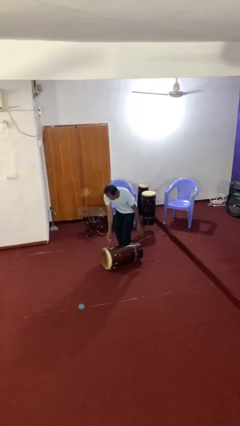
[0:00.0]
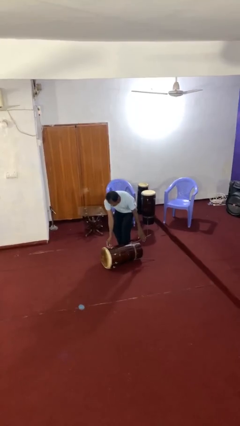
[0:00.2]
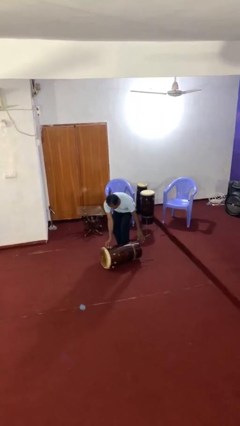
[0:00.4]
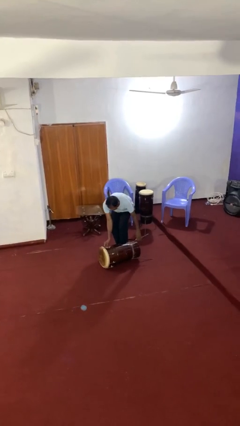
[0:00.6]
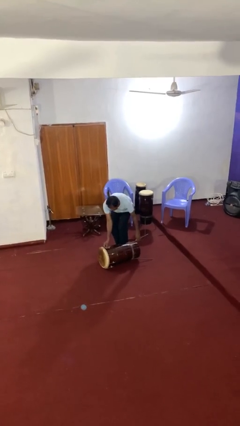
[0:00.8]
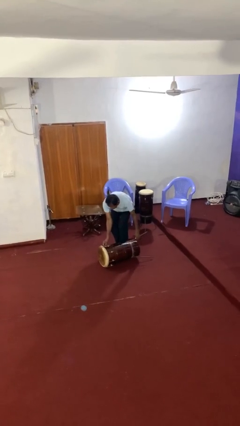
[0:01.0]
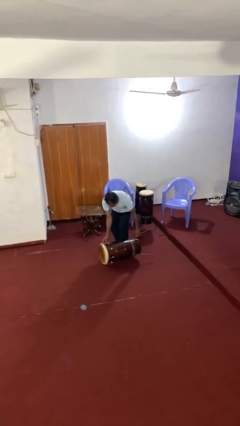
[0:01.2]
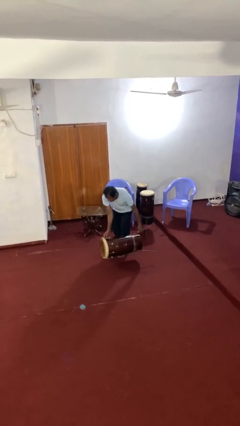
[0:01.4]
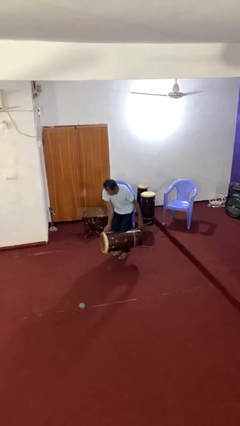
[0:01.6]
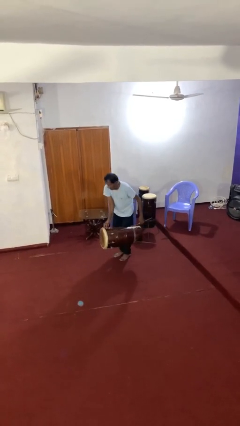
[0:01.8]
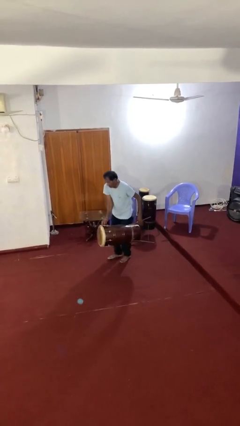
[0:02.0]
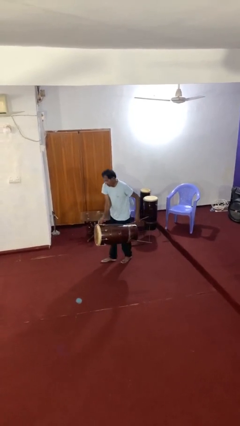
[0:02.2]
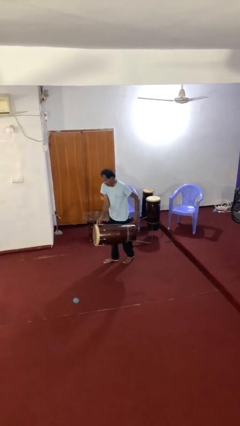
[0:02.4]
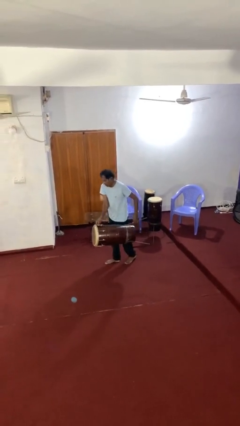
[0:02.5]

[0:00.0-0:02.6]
person picks up object from floor

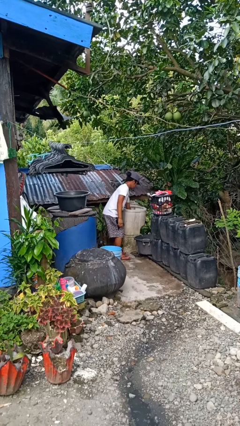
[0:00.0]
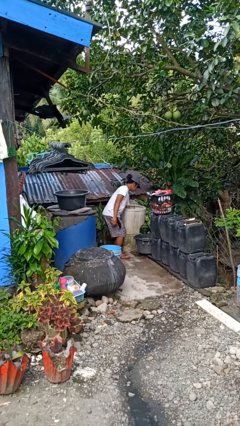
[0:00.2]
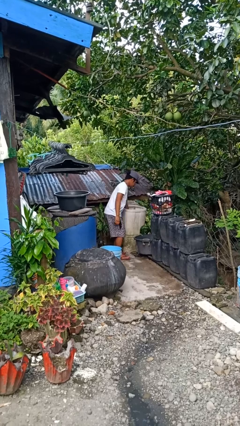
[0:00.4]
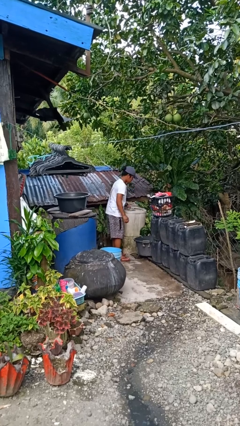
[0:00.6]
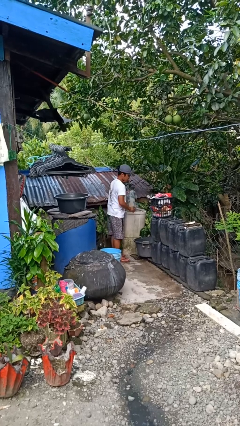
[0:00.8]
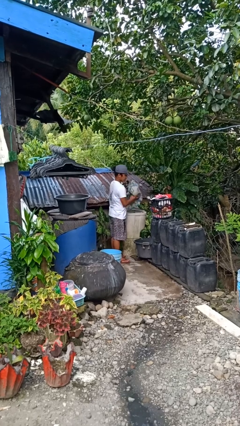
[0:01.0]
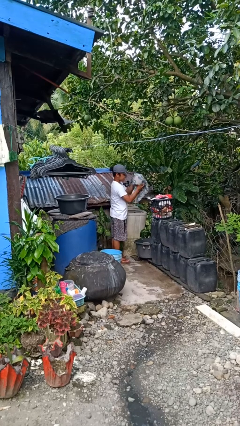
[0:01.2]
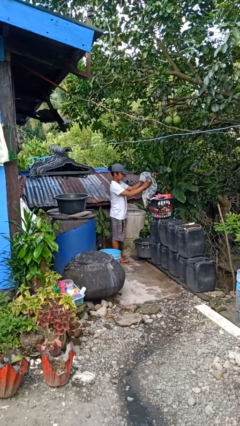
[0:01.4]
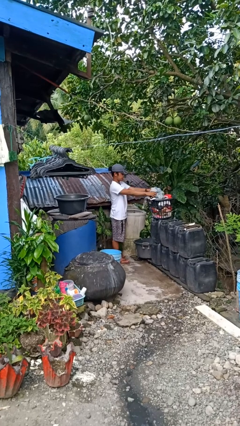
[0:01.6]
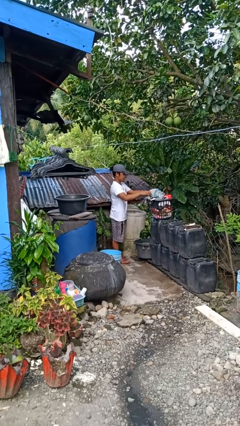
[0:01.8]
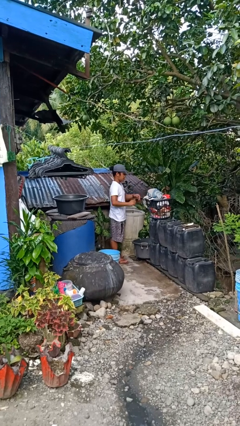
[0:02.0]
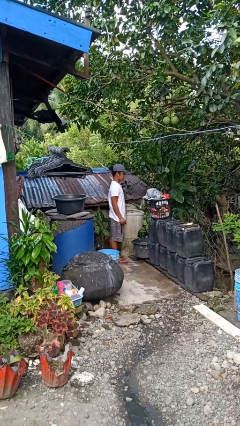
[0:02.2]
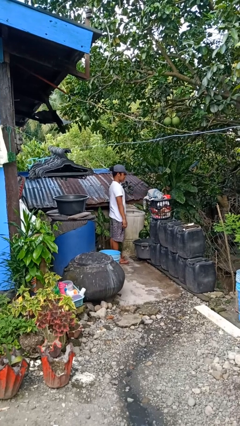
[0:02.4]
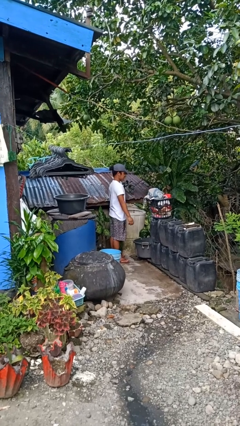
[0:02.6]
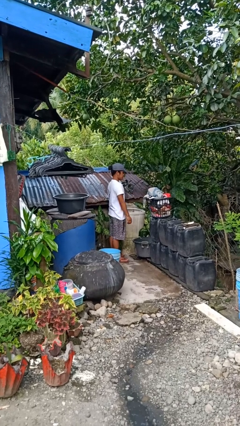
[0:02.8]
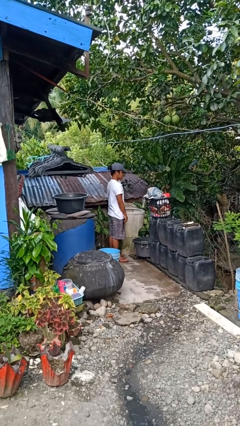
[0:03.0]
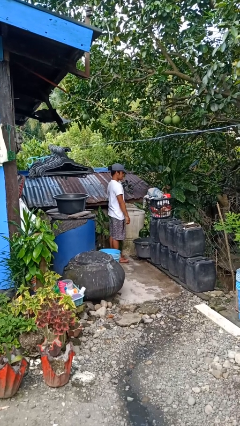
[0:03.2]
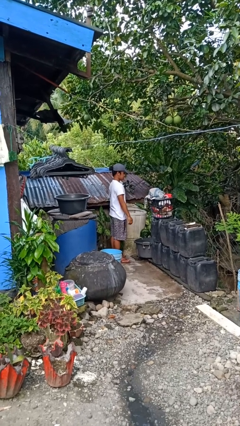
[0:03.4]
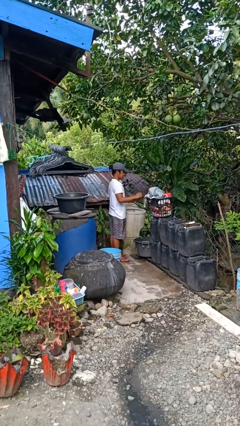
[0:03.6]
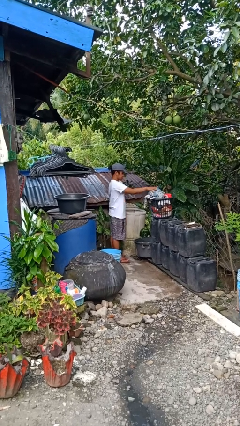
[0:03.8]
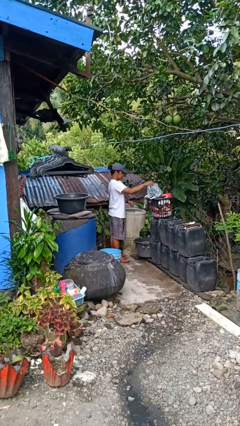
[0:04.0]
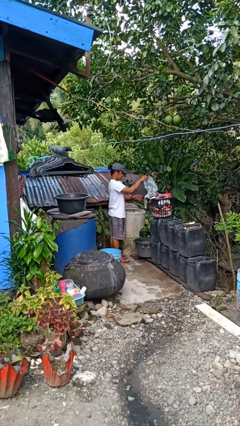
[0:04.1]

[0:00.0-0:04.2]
person unloads clotheswasher

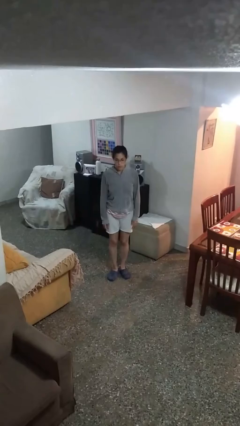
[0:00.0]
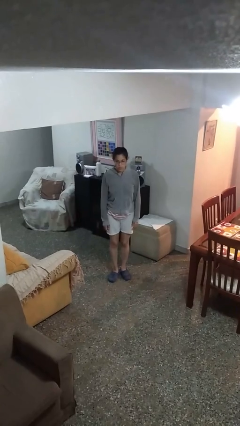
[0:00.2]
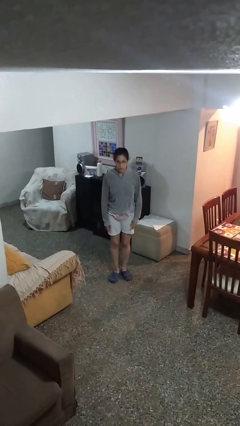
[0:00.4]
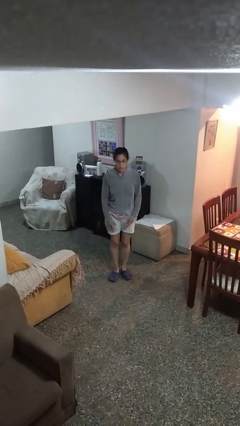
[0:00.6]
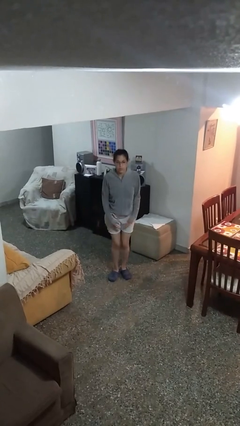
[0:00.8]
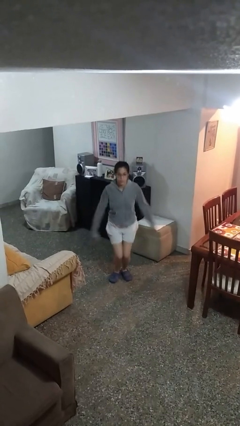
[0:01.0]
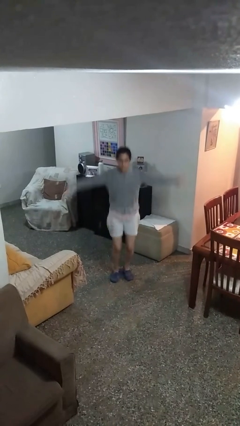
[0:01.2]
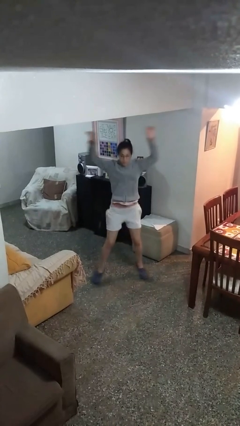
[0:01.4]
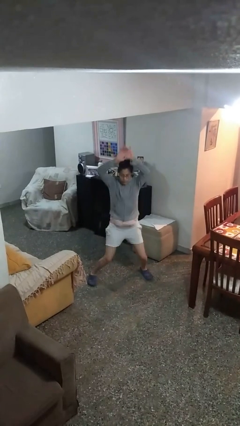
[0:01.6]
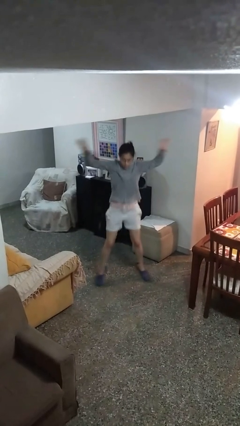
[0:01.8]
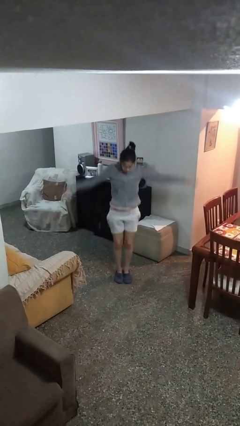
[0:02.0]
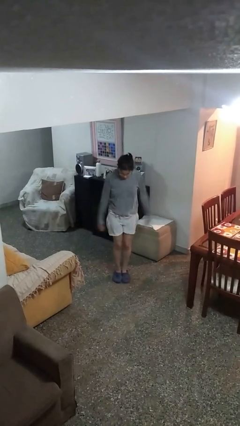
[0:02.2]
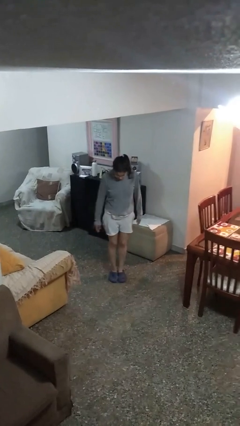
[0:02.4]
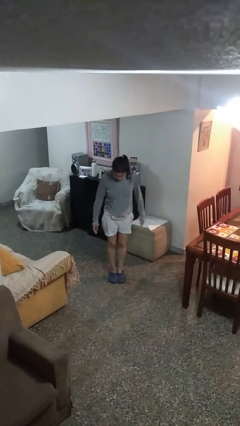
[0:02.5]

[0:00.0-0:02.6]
person exercises with jumping jacks

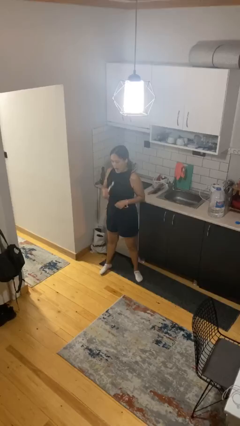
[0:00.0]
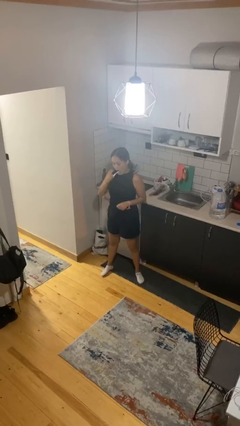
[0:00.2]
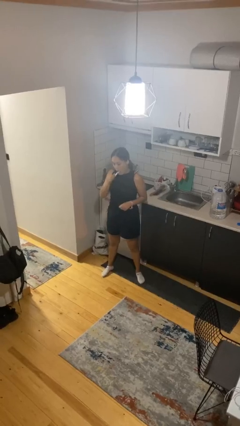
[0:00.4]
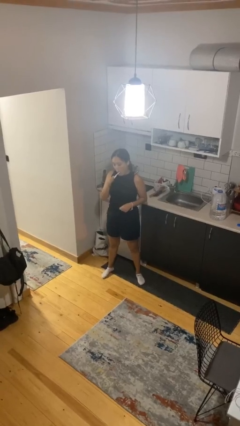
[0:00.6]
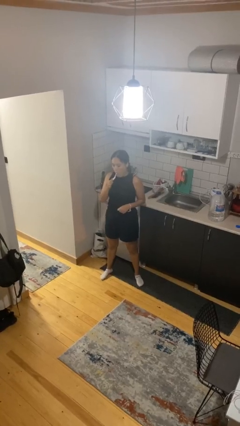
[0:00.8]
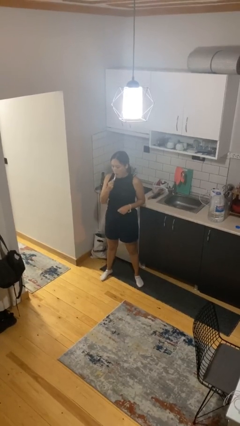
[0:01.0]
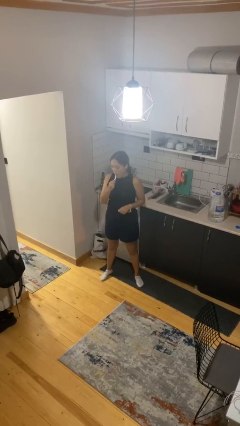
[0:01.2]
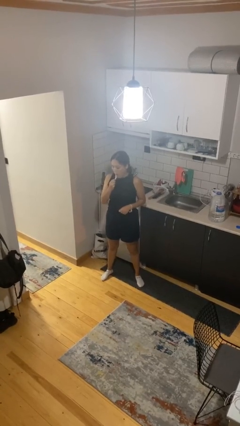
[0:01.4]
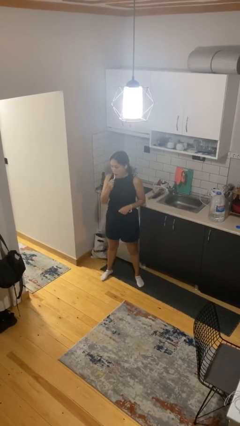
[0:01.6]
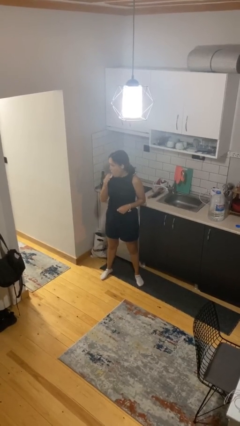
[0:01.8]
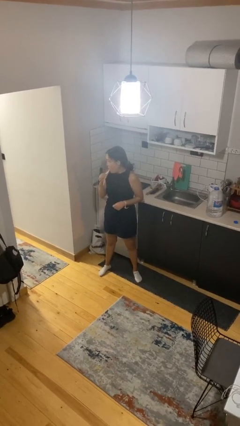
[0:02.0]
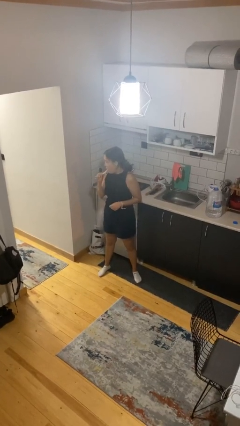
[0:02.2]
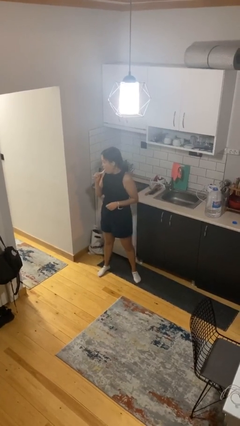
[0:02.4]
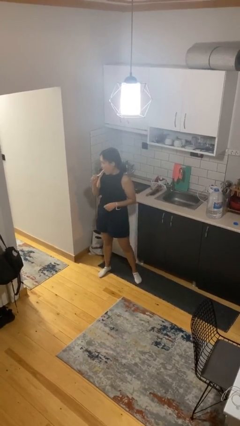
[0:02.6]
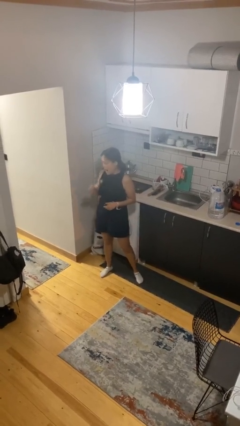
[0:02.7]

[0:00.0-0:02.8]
person brushes teeth

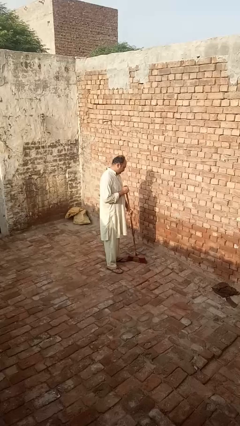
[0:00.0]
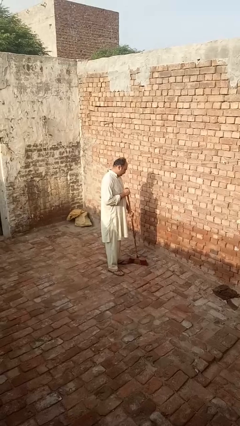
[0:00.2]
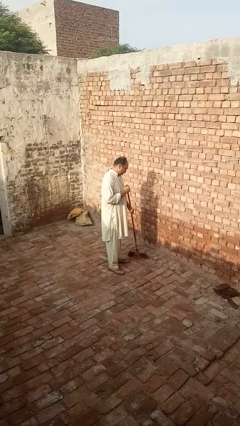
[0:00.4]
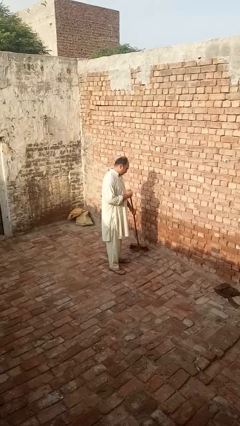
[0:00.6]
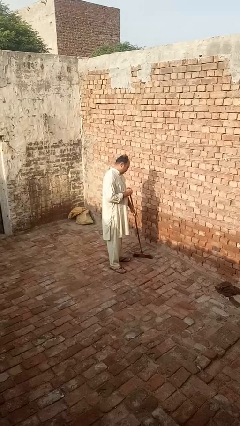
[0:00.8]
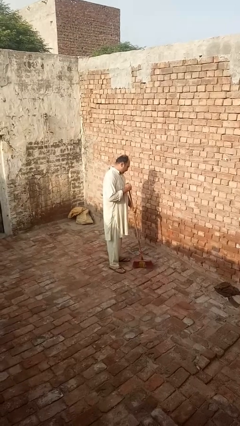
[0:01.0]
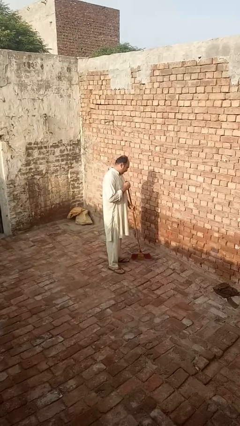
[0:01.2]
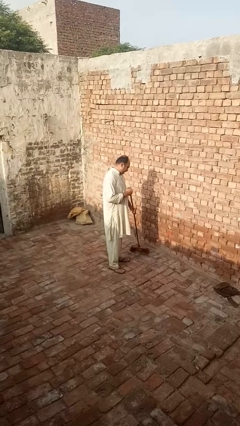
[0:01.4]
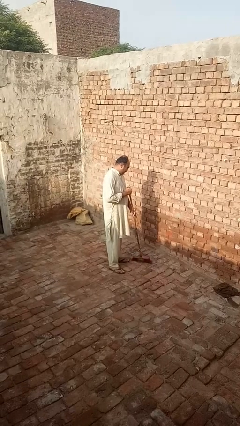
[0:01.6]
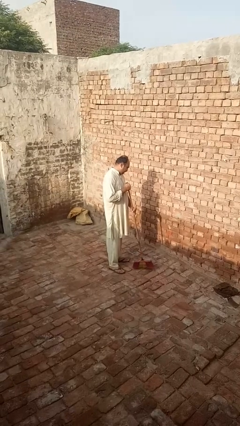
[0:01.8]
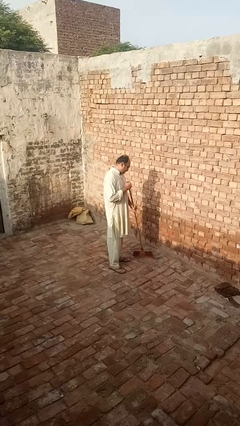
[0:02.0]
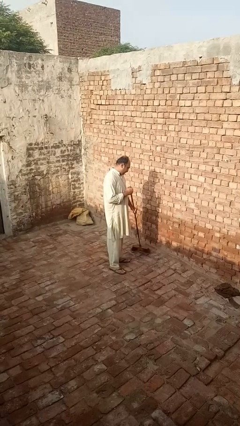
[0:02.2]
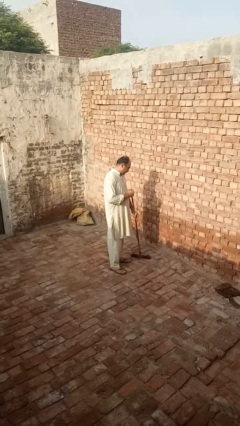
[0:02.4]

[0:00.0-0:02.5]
person sweeps floor

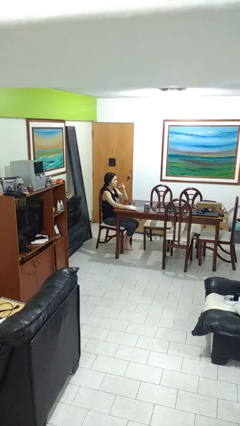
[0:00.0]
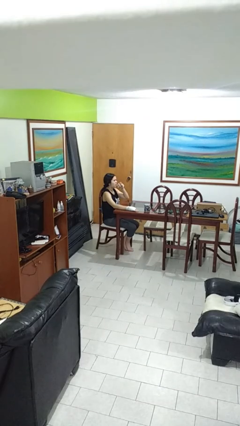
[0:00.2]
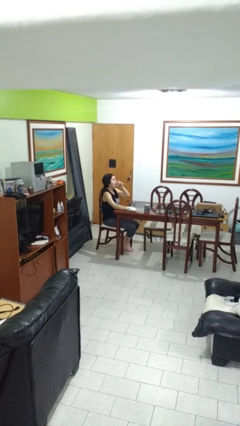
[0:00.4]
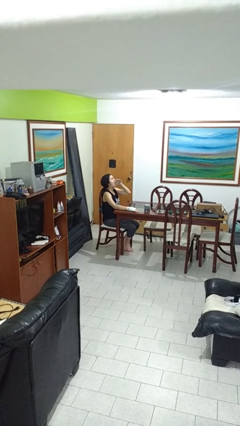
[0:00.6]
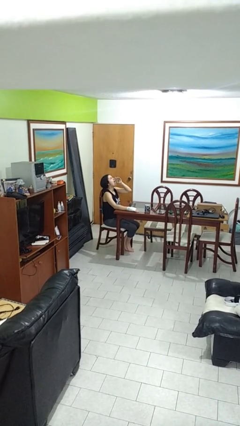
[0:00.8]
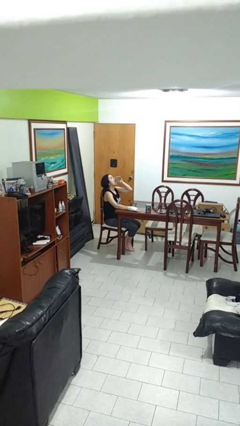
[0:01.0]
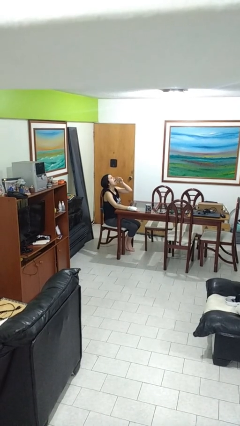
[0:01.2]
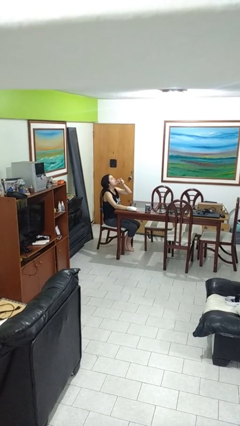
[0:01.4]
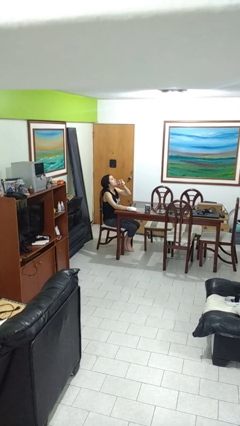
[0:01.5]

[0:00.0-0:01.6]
person drinks from shotglass

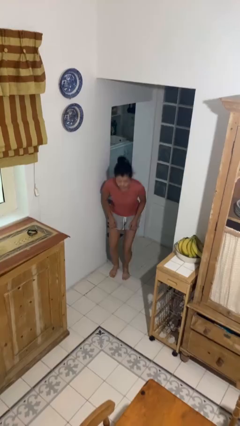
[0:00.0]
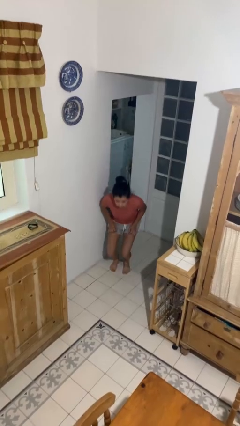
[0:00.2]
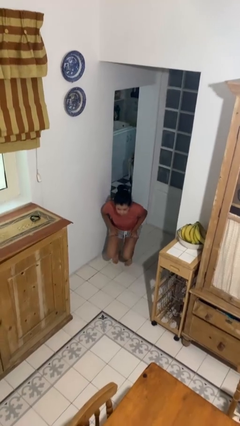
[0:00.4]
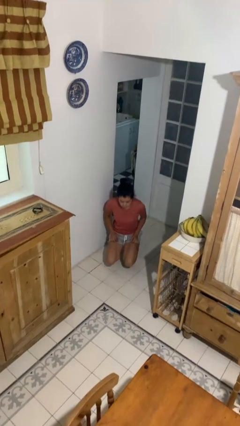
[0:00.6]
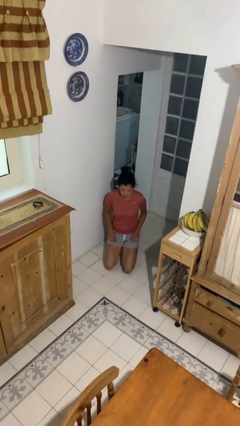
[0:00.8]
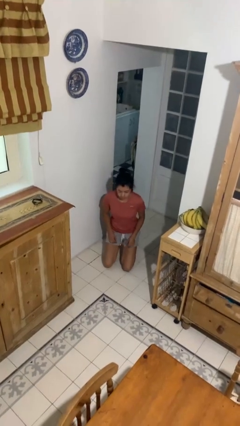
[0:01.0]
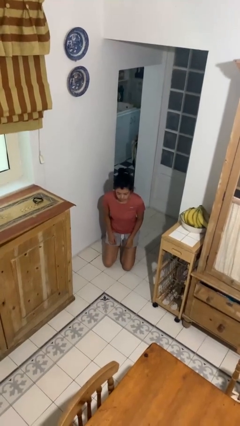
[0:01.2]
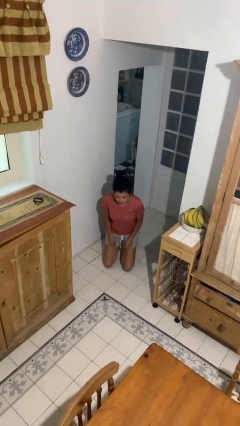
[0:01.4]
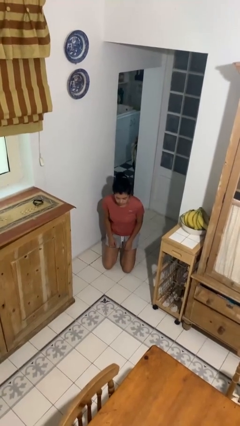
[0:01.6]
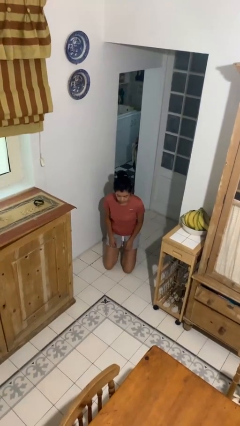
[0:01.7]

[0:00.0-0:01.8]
person kneels
